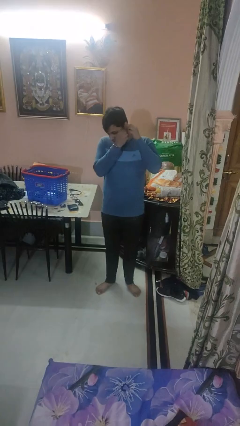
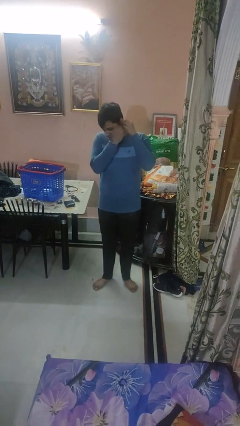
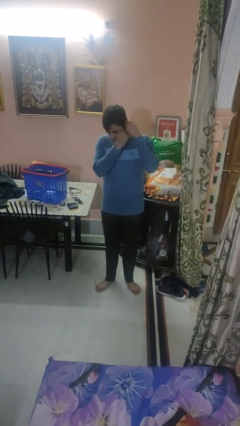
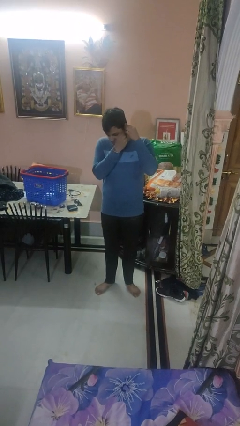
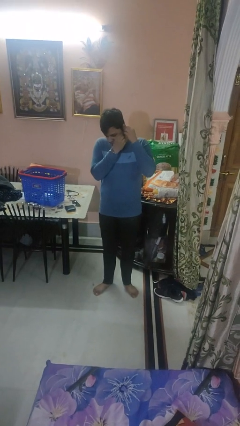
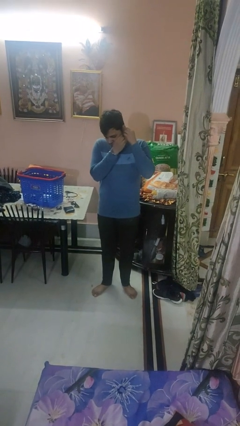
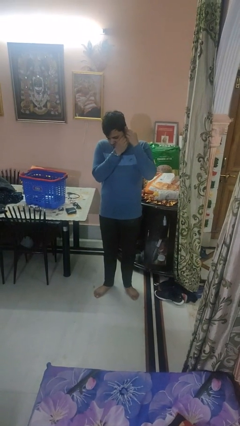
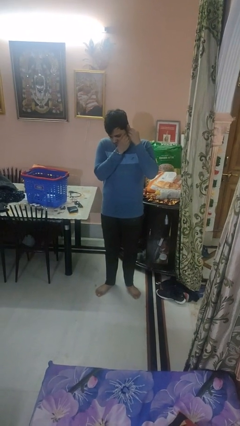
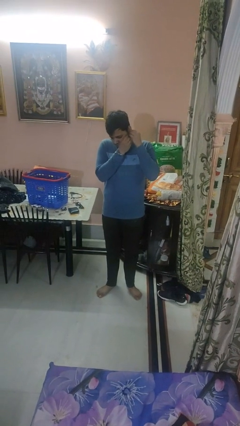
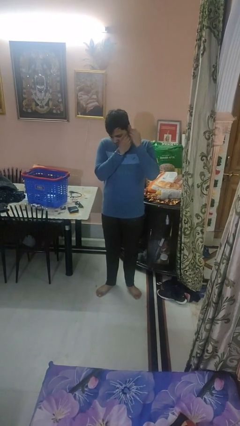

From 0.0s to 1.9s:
person puts on earrings

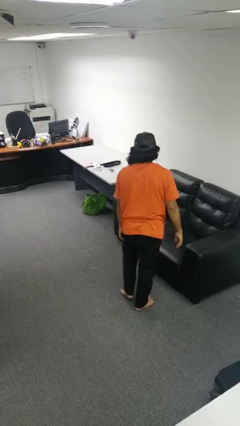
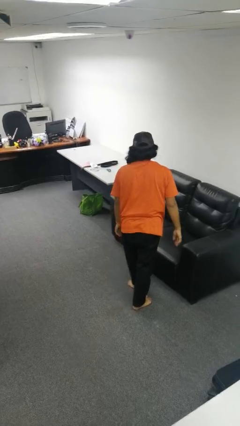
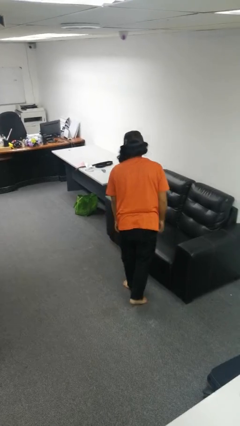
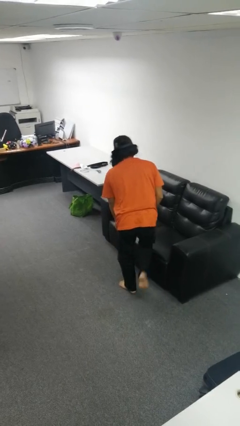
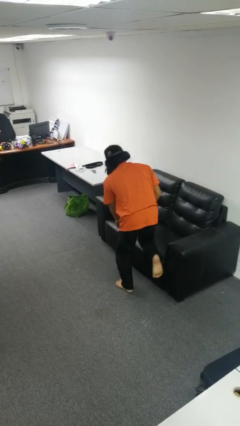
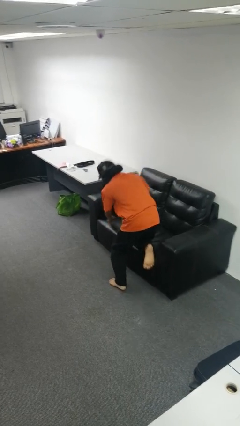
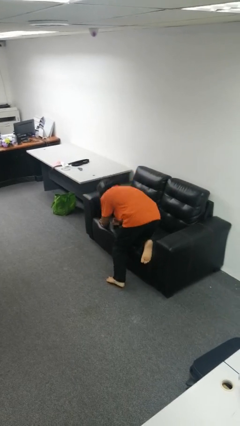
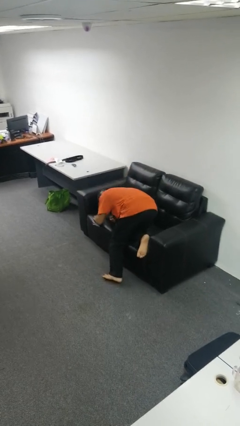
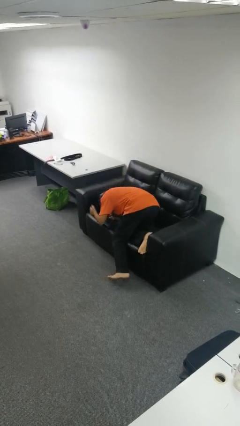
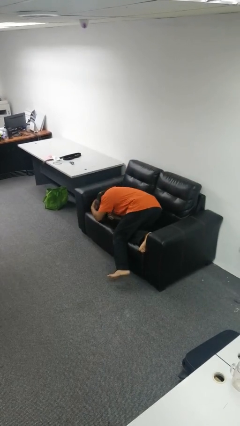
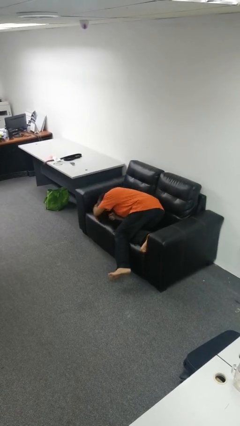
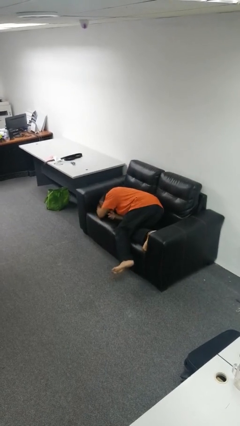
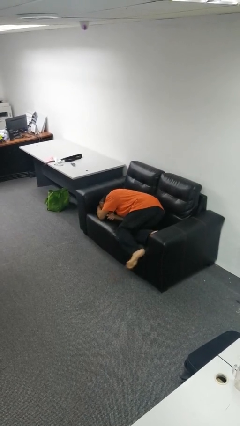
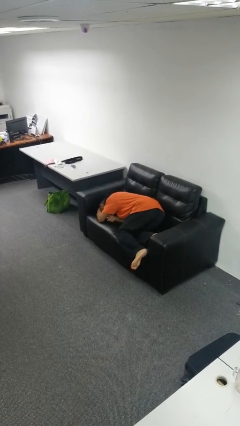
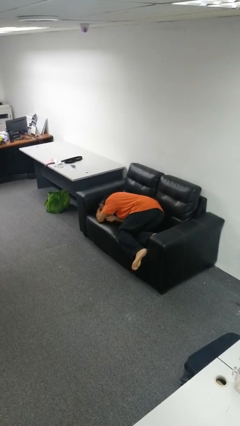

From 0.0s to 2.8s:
person lies down on couch

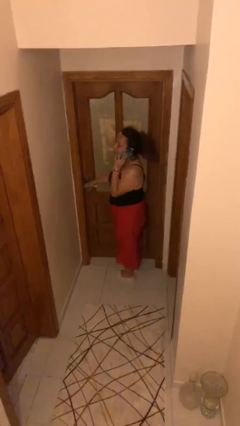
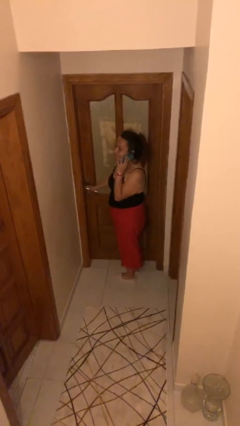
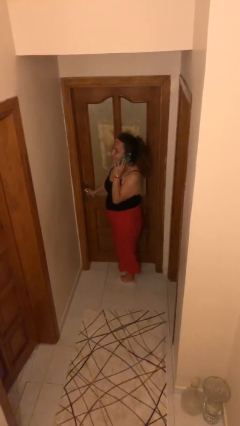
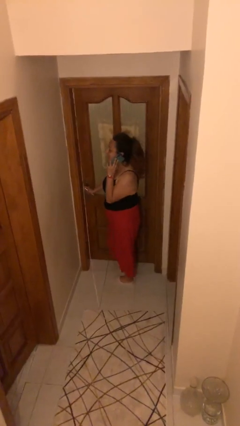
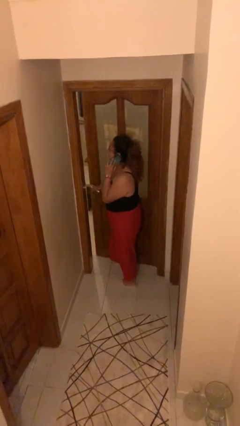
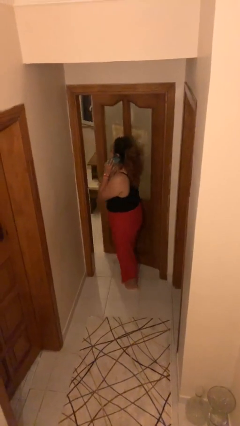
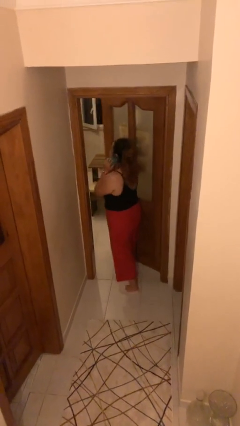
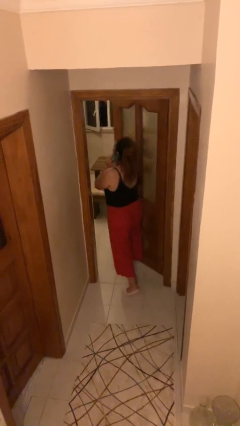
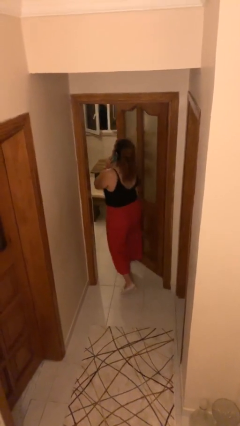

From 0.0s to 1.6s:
person opens facility door

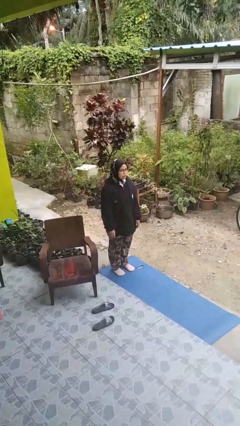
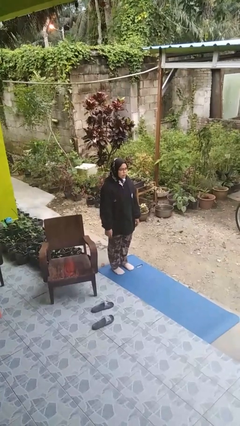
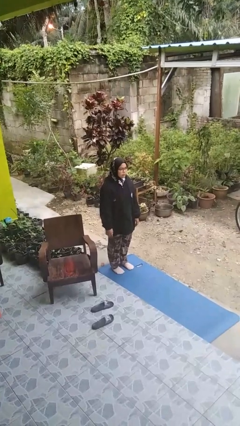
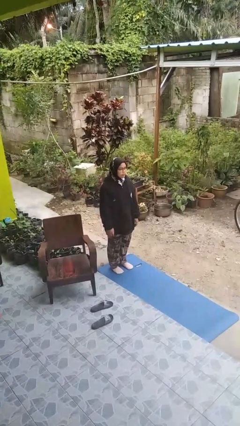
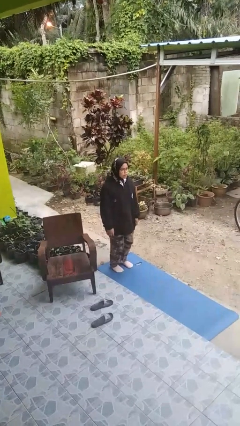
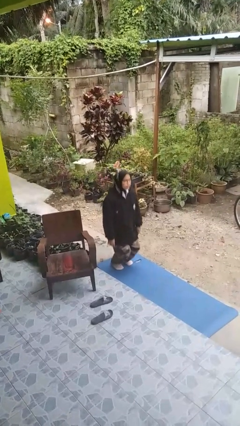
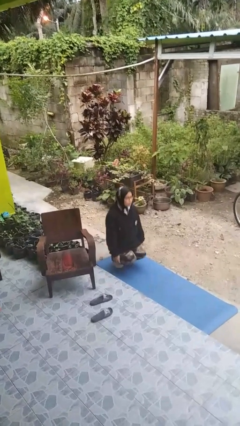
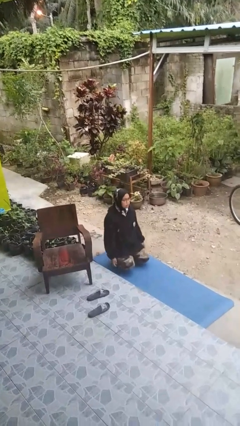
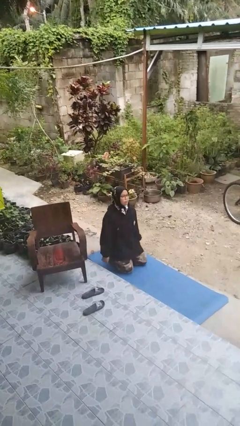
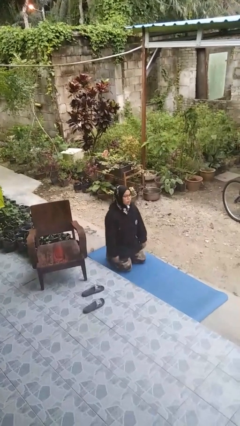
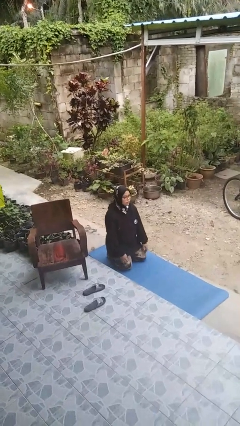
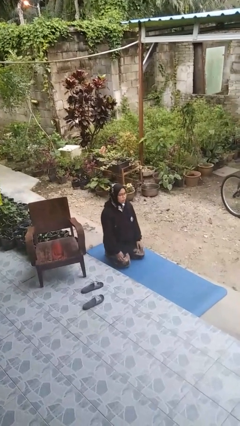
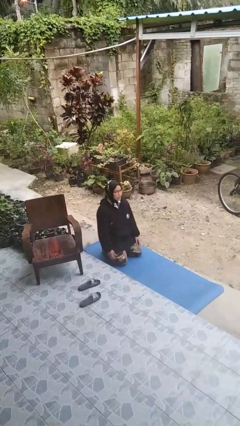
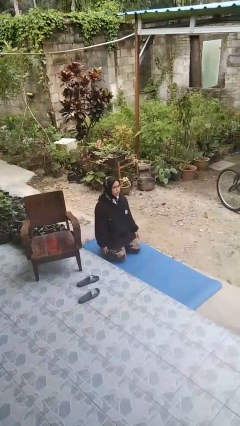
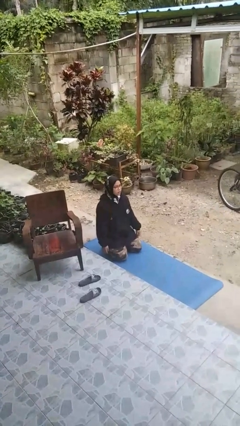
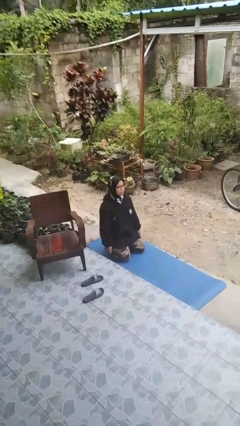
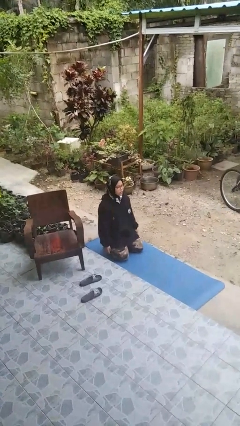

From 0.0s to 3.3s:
person kneels

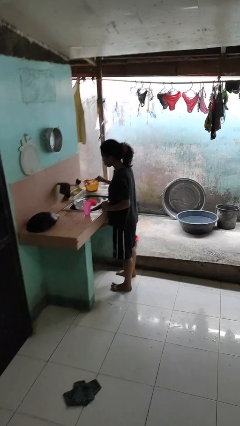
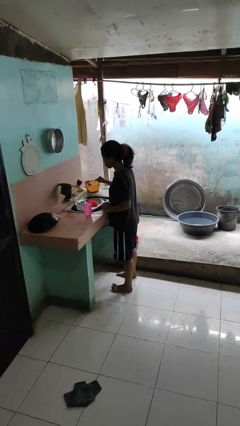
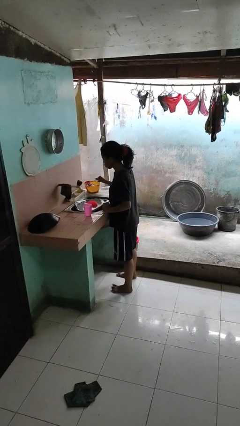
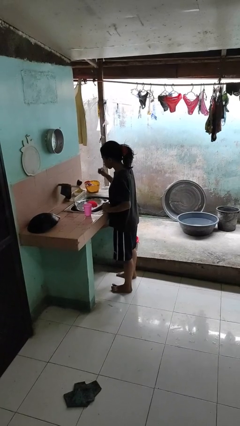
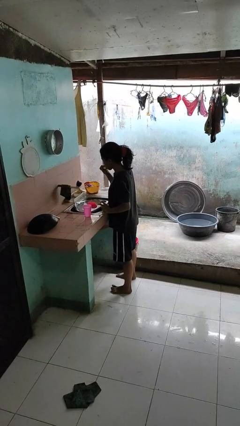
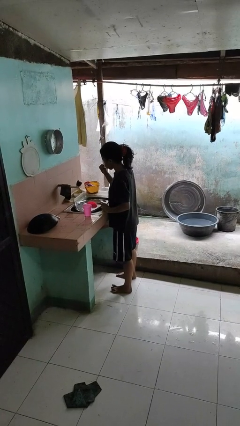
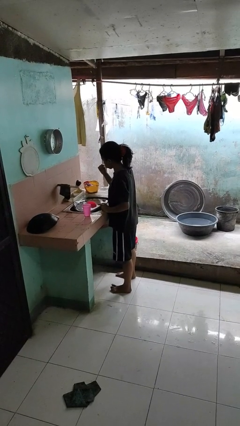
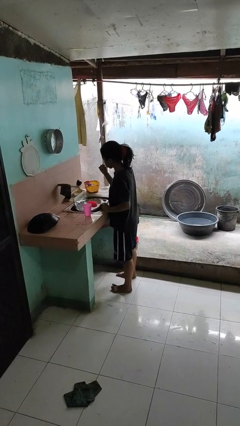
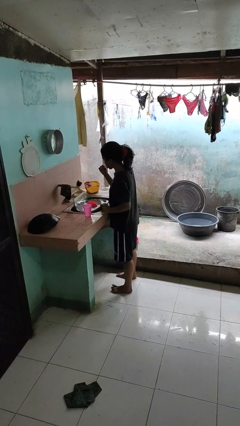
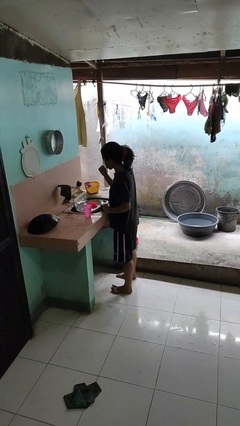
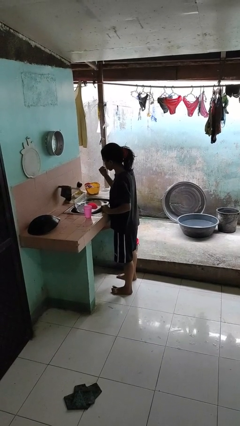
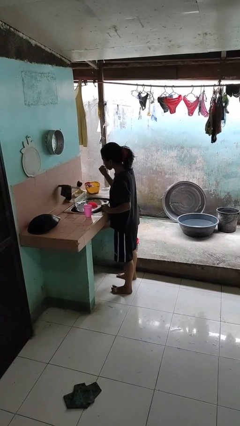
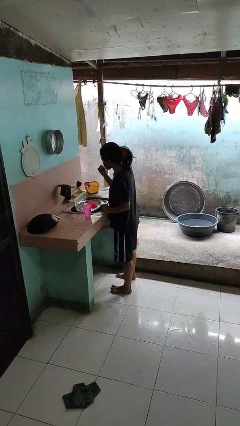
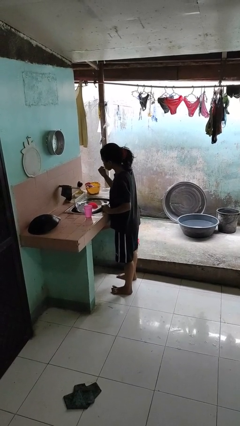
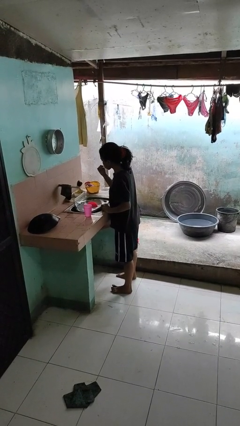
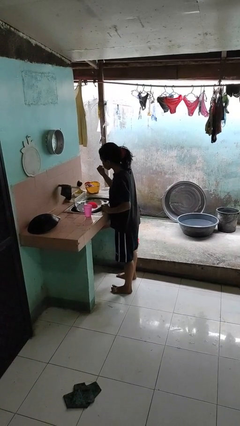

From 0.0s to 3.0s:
person brushes teeth

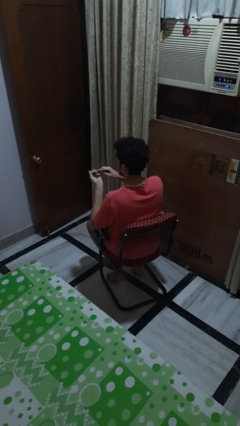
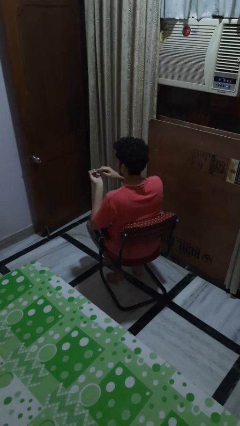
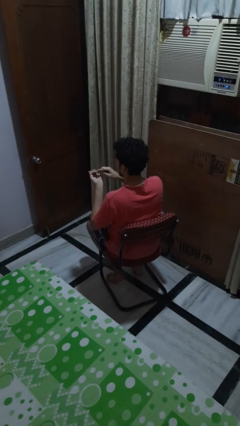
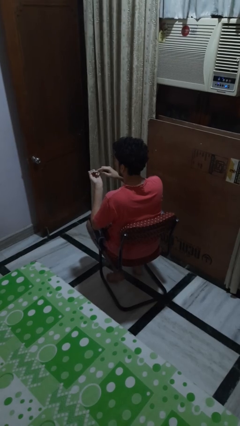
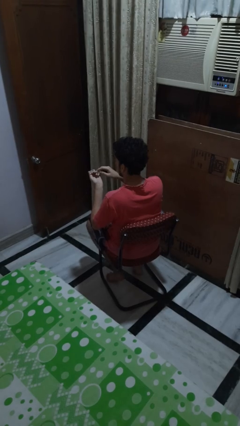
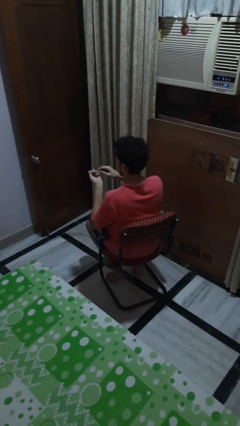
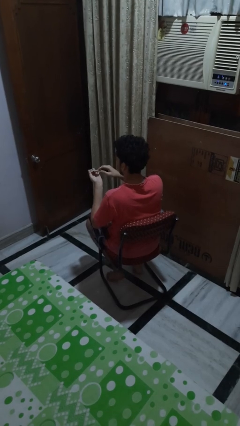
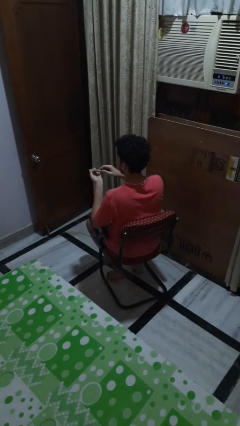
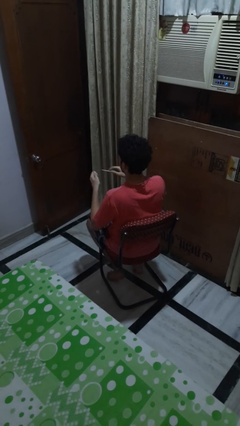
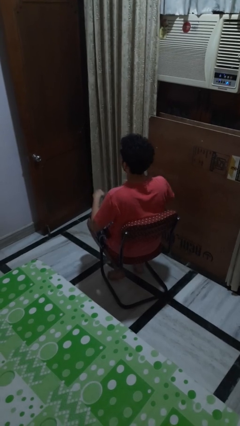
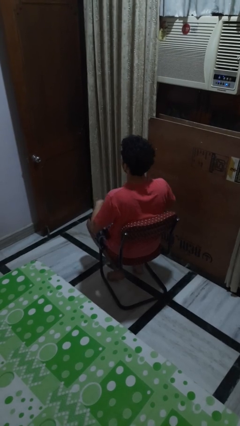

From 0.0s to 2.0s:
person files fingernails

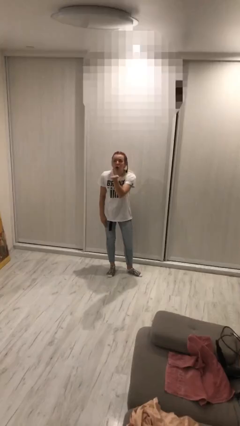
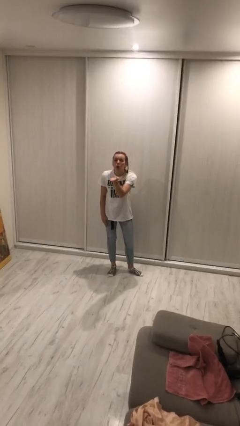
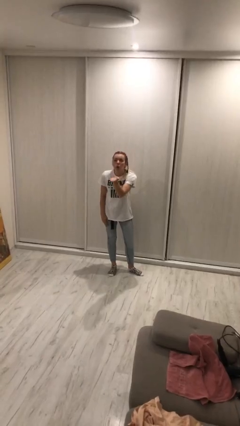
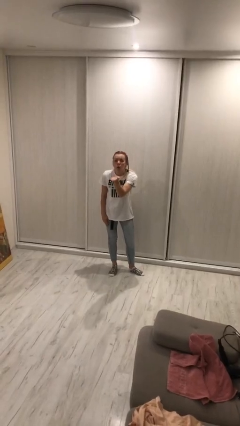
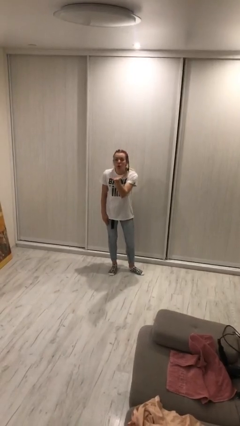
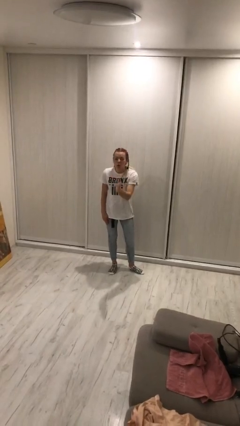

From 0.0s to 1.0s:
person gestures blow kiss

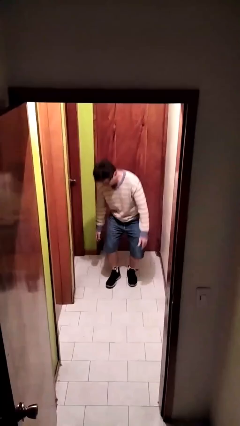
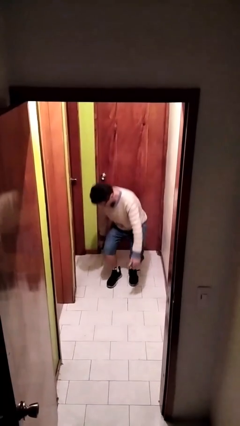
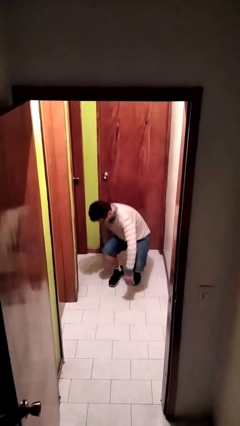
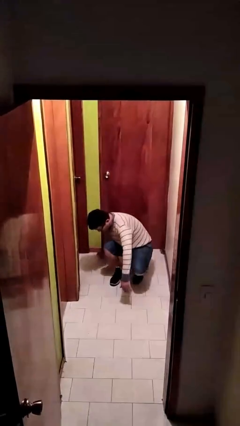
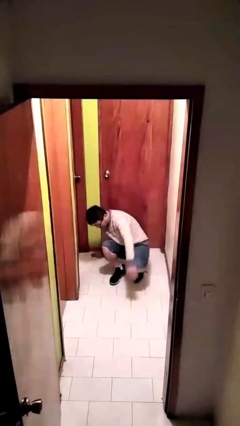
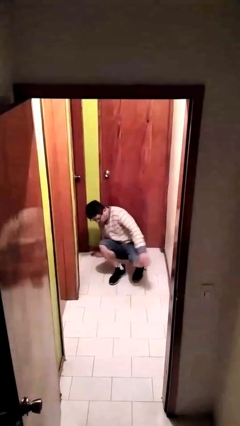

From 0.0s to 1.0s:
person sits down

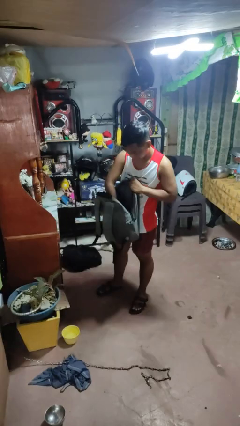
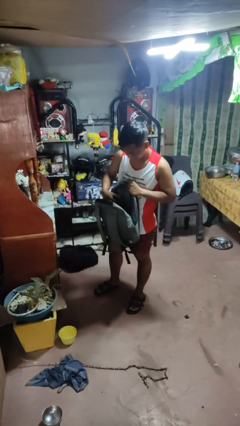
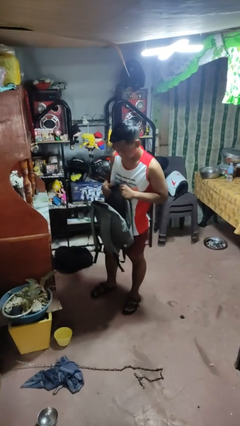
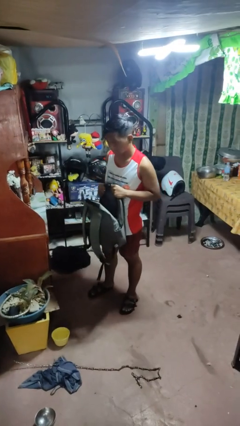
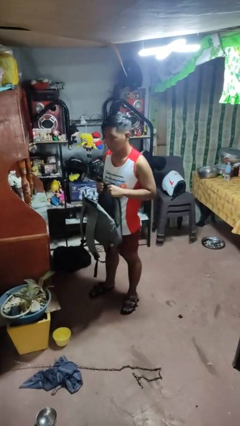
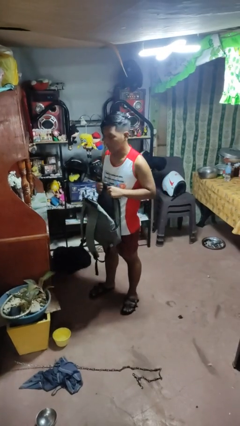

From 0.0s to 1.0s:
person puts object into bag
